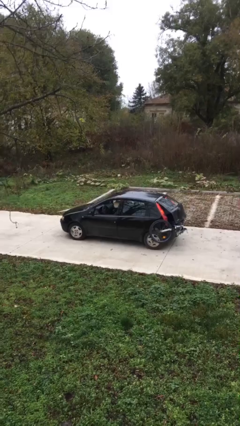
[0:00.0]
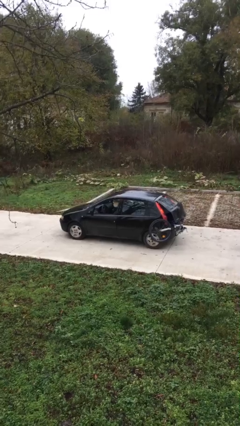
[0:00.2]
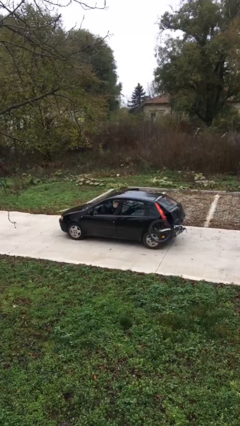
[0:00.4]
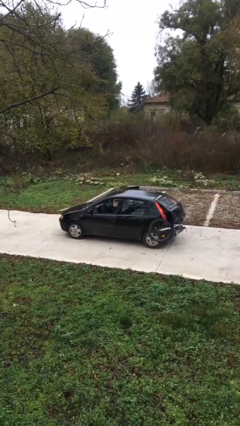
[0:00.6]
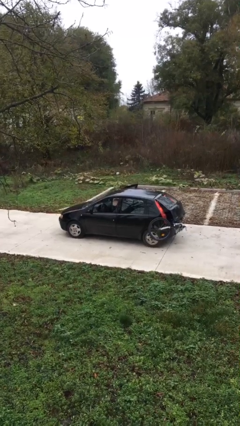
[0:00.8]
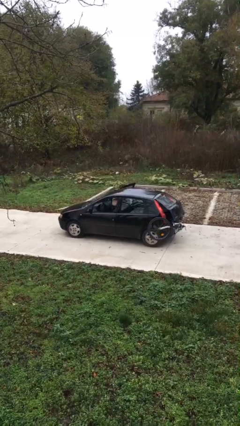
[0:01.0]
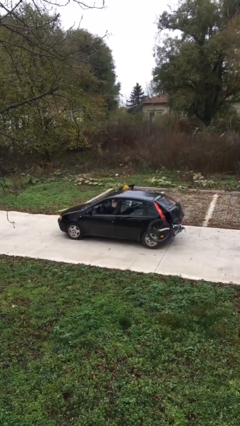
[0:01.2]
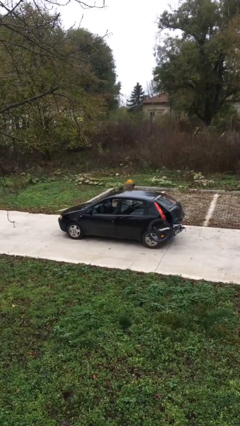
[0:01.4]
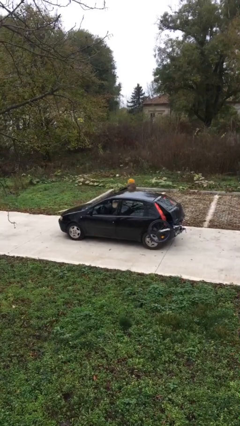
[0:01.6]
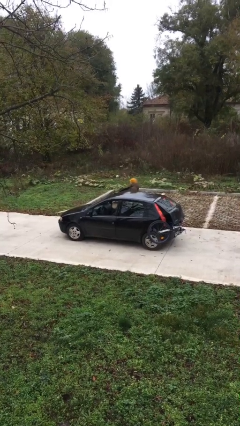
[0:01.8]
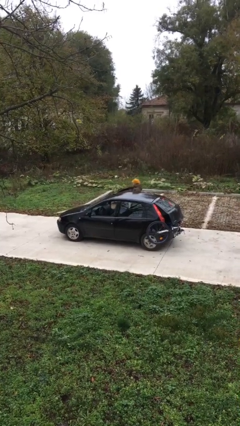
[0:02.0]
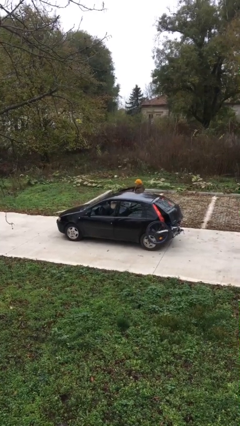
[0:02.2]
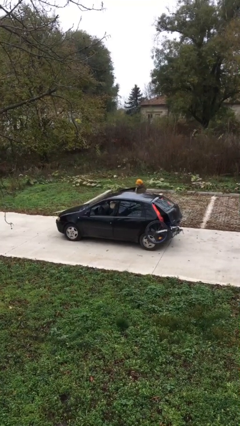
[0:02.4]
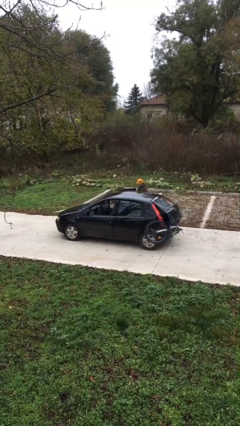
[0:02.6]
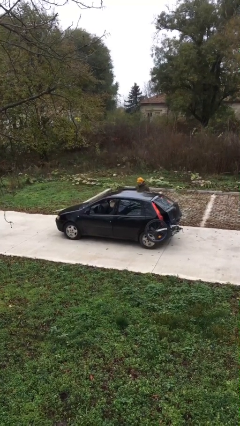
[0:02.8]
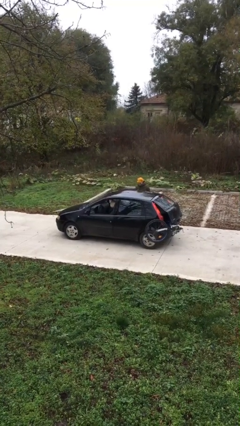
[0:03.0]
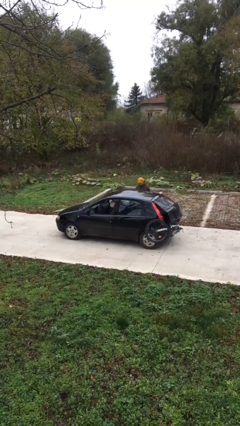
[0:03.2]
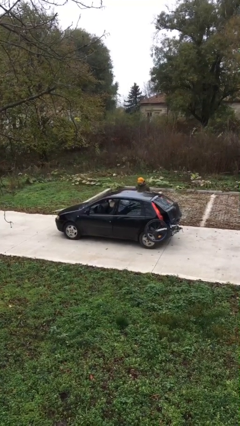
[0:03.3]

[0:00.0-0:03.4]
car drops off person

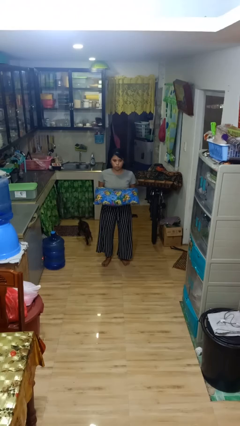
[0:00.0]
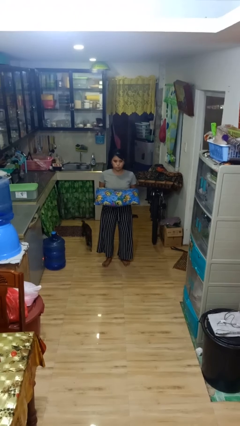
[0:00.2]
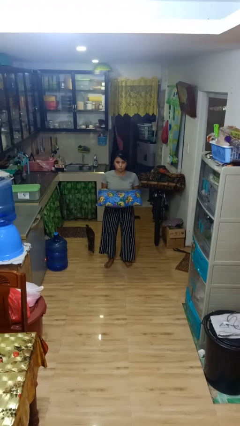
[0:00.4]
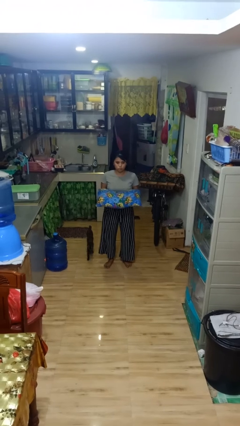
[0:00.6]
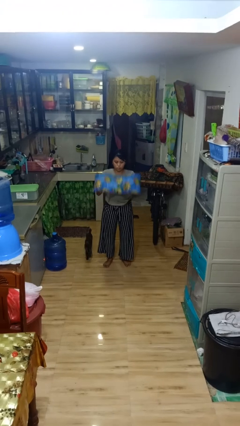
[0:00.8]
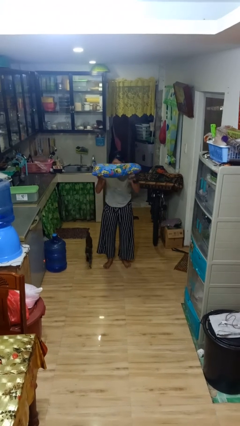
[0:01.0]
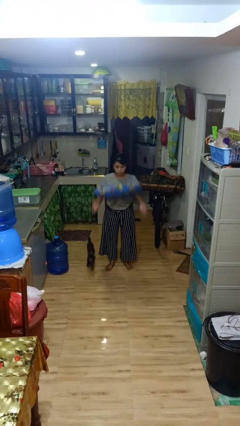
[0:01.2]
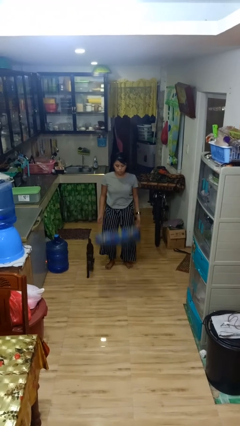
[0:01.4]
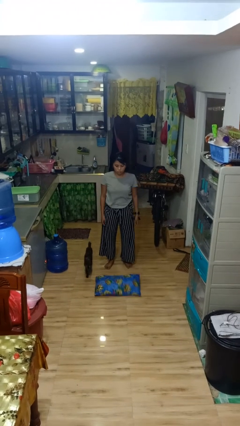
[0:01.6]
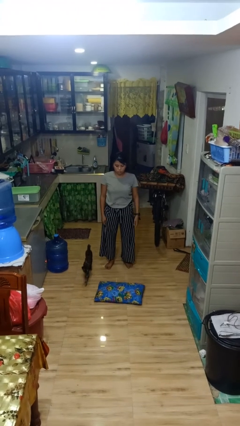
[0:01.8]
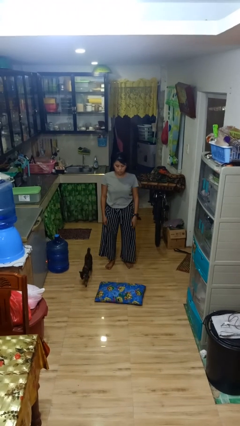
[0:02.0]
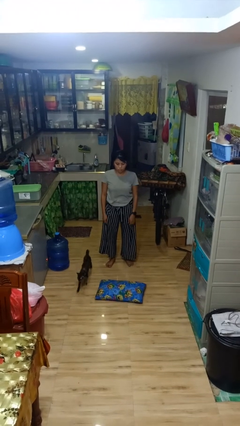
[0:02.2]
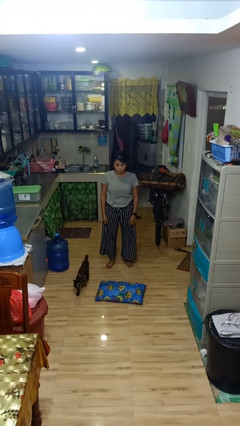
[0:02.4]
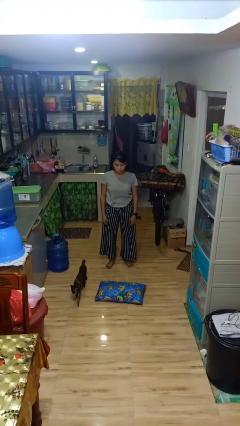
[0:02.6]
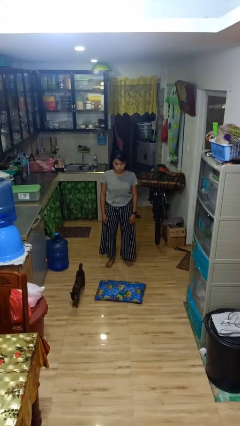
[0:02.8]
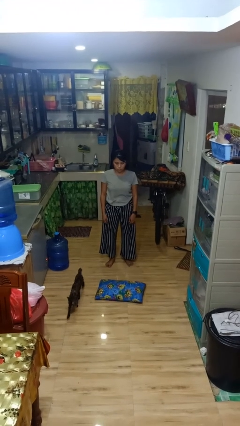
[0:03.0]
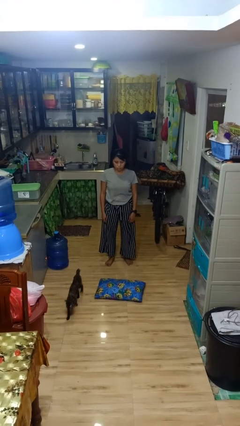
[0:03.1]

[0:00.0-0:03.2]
person throws object into air

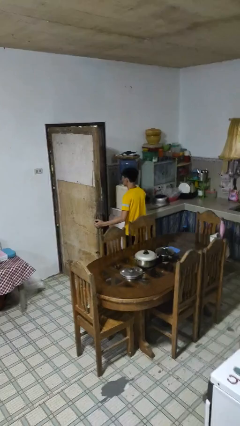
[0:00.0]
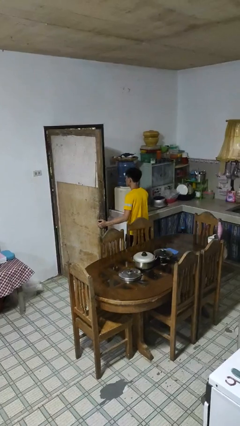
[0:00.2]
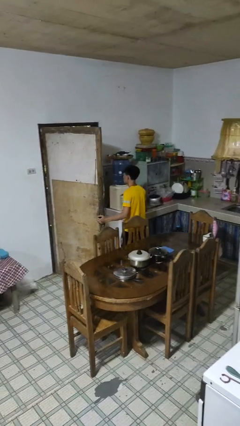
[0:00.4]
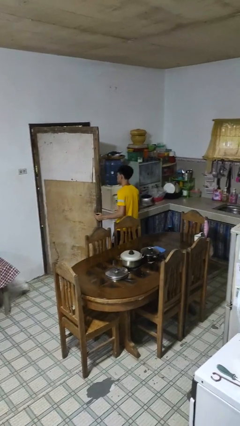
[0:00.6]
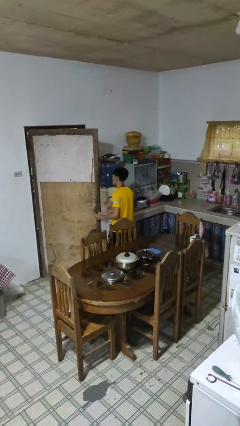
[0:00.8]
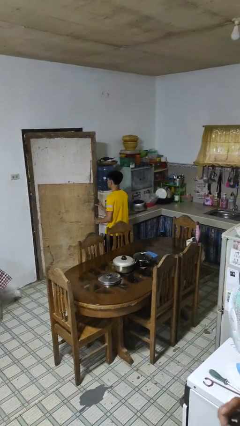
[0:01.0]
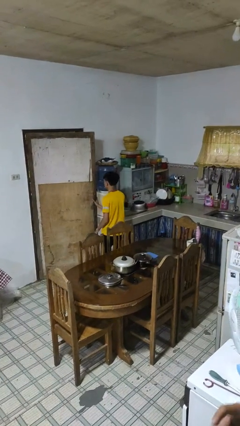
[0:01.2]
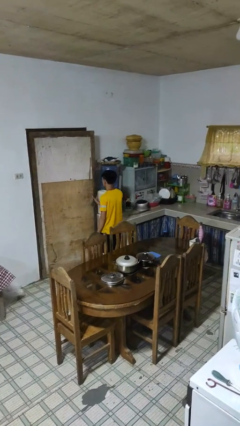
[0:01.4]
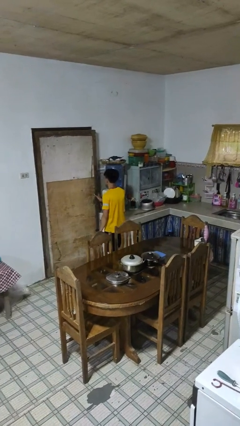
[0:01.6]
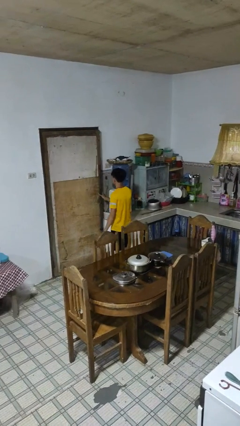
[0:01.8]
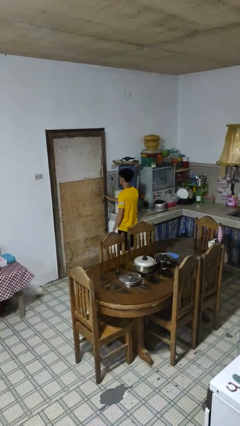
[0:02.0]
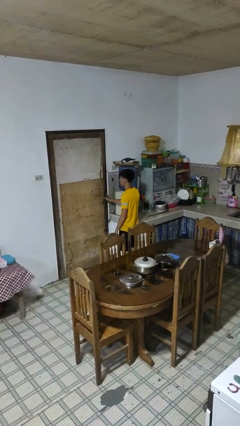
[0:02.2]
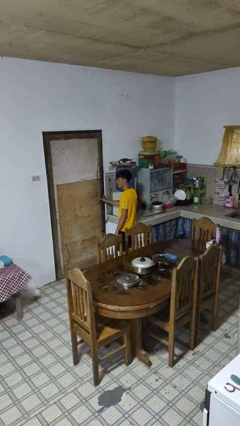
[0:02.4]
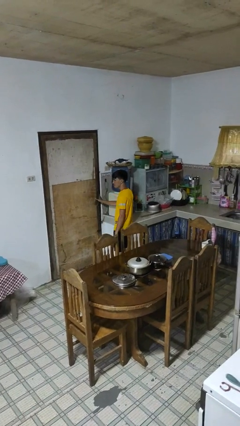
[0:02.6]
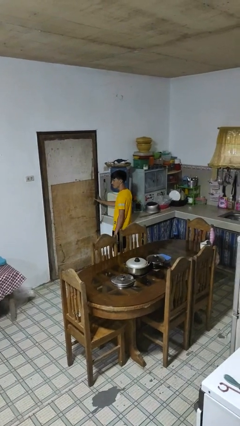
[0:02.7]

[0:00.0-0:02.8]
person closes facility door

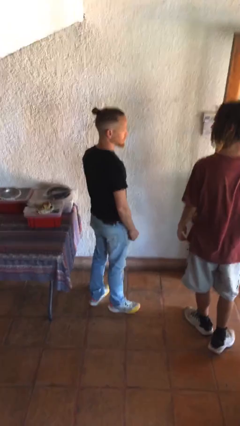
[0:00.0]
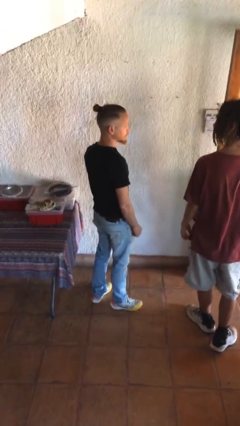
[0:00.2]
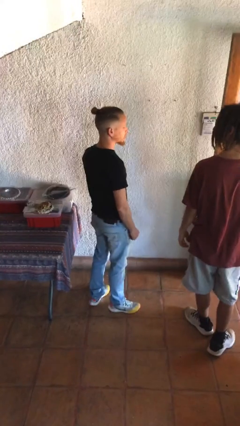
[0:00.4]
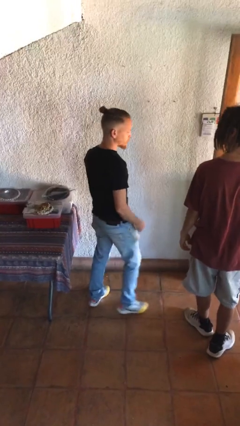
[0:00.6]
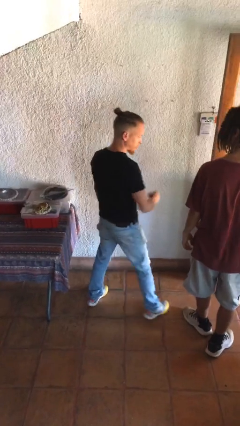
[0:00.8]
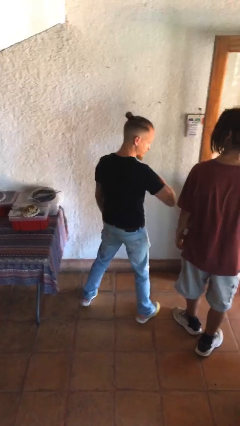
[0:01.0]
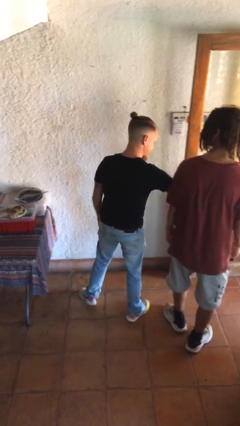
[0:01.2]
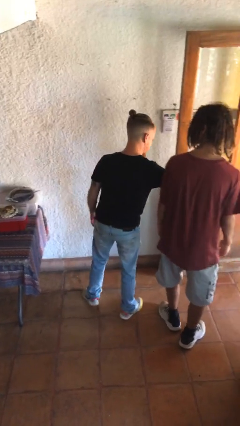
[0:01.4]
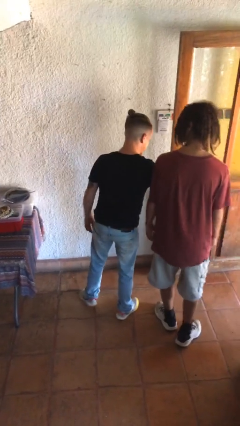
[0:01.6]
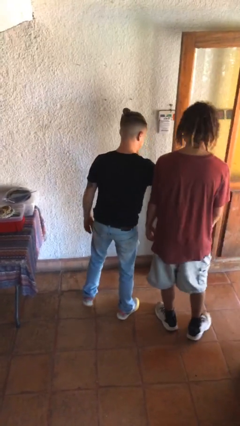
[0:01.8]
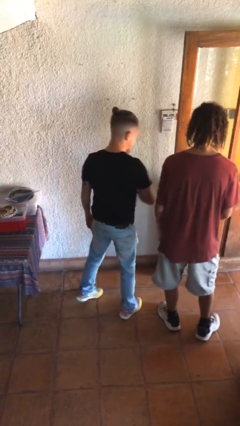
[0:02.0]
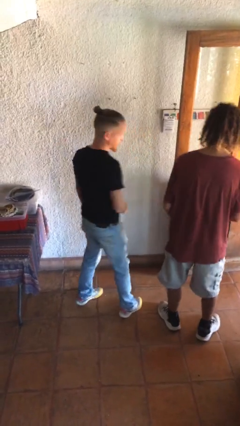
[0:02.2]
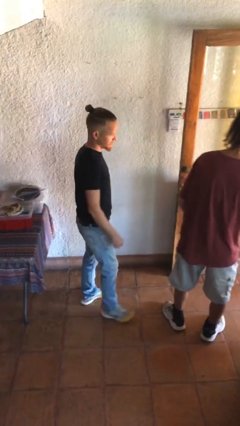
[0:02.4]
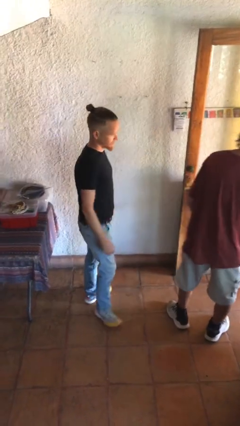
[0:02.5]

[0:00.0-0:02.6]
person nudges person with elbow

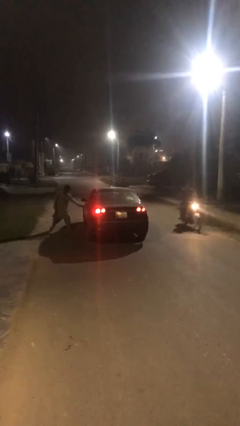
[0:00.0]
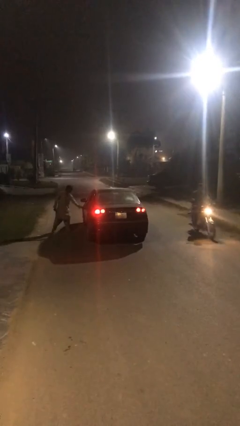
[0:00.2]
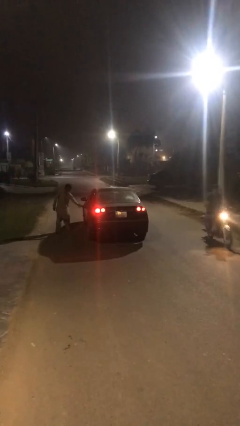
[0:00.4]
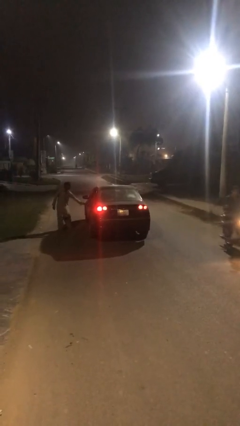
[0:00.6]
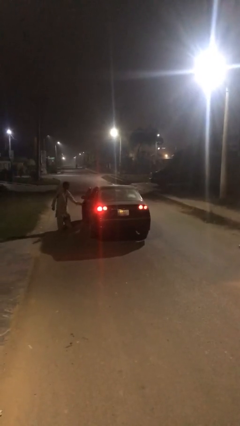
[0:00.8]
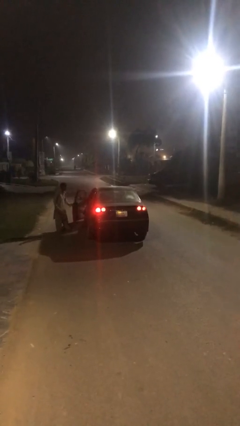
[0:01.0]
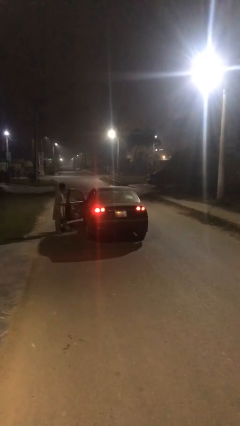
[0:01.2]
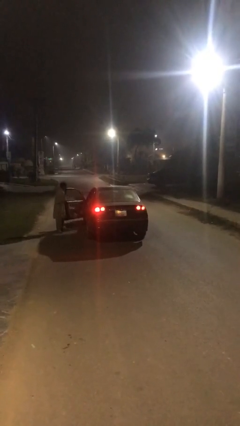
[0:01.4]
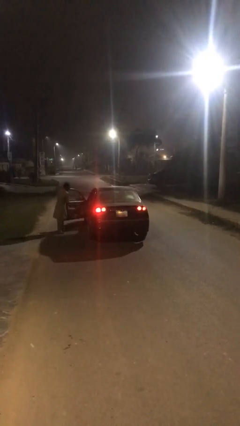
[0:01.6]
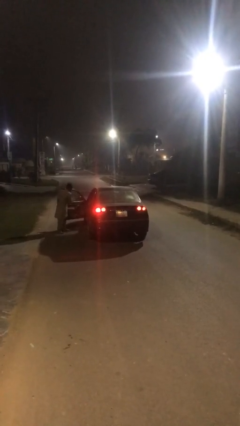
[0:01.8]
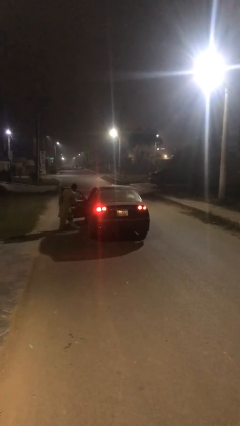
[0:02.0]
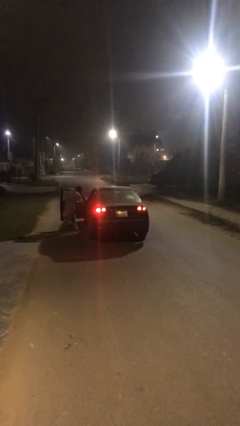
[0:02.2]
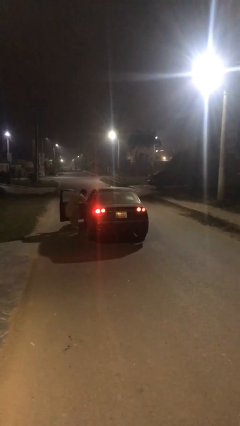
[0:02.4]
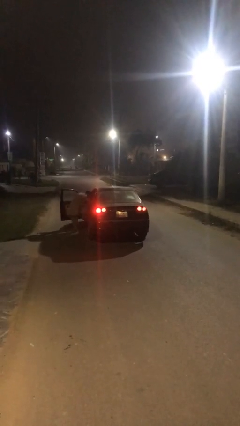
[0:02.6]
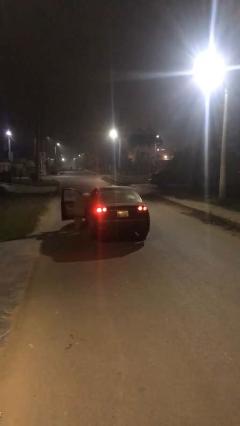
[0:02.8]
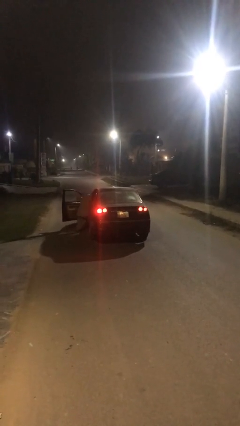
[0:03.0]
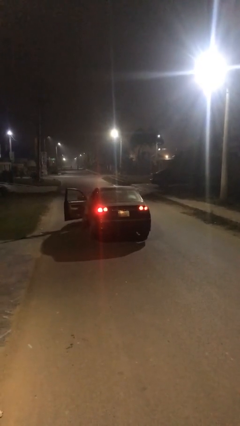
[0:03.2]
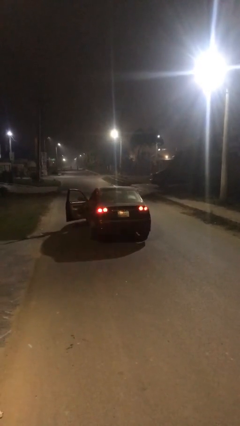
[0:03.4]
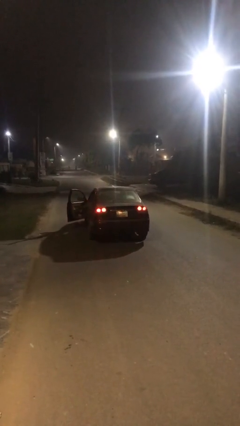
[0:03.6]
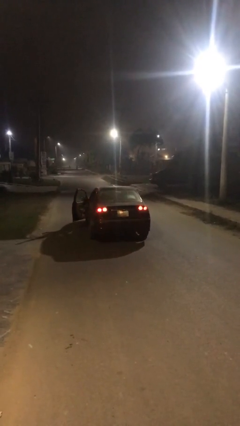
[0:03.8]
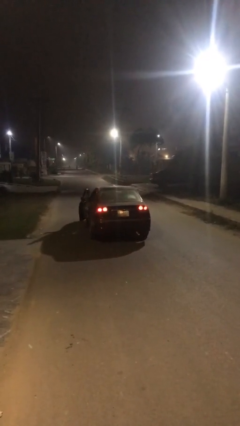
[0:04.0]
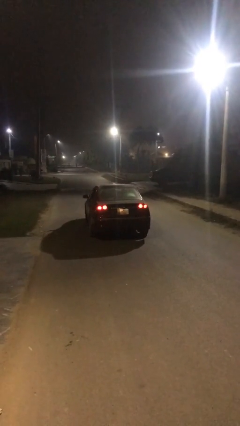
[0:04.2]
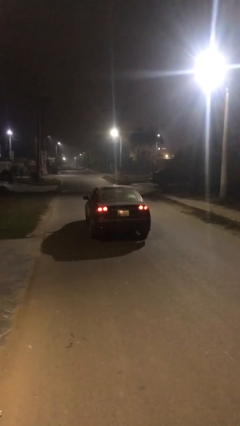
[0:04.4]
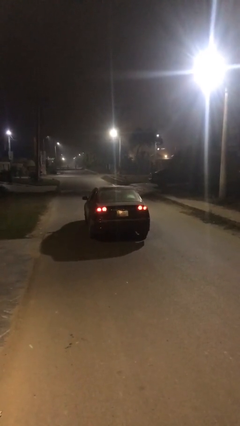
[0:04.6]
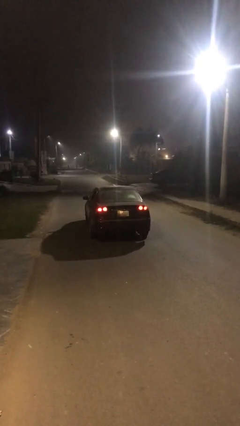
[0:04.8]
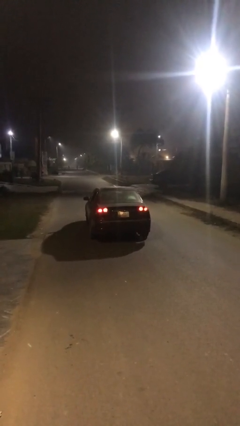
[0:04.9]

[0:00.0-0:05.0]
car picks up person

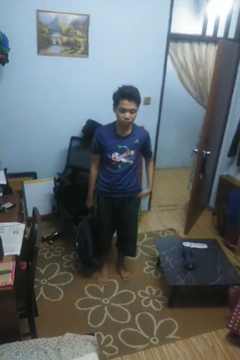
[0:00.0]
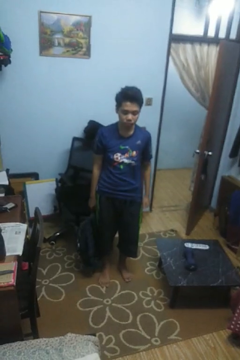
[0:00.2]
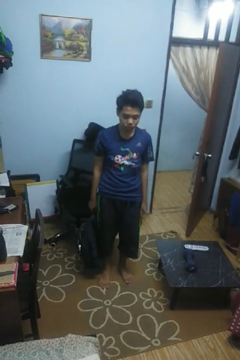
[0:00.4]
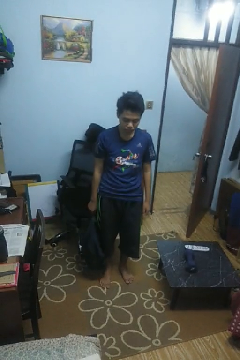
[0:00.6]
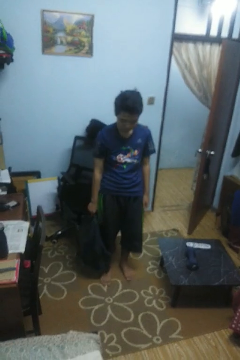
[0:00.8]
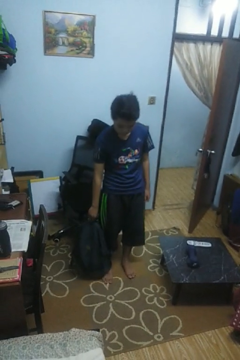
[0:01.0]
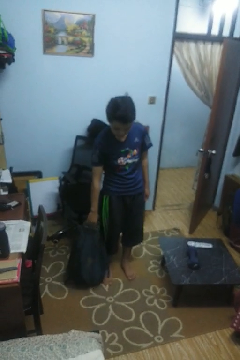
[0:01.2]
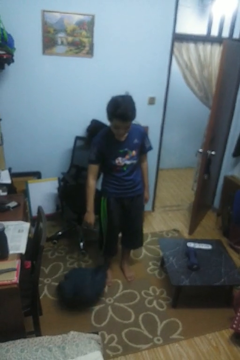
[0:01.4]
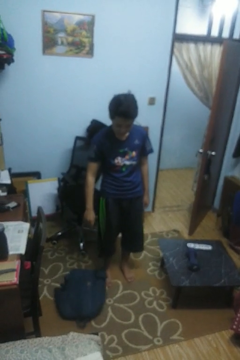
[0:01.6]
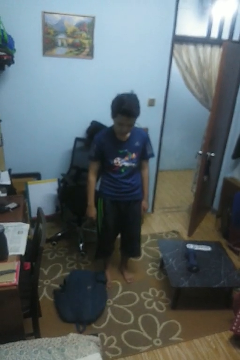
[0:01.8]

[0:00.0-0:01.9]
person drops object
